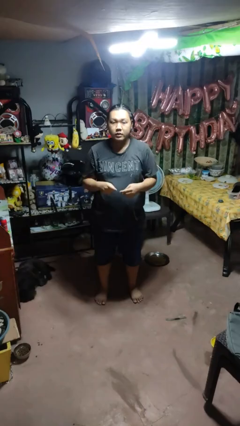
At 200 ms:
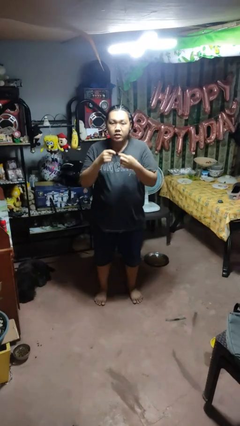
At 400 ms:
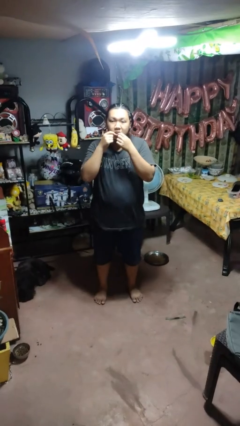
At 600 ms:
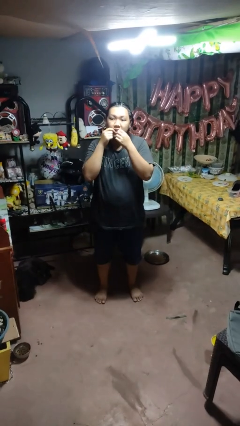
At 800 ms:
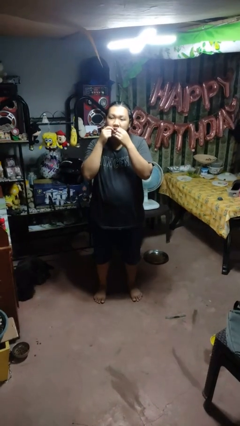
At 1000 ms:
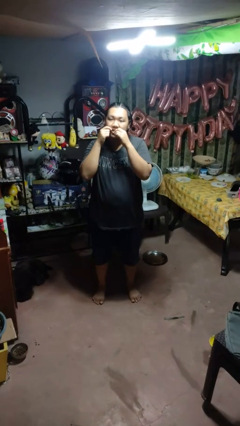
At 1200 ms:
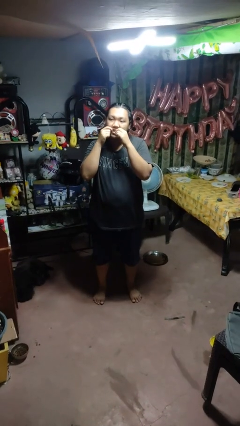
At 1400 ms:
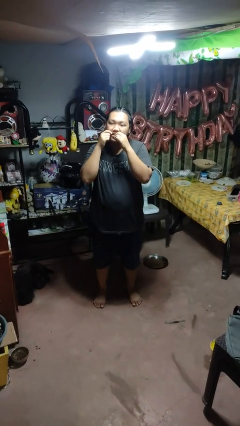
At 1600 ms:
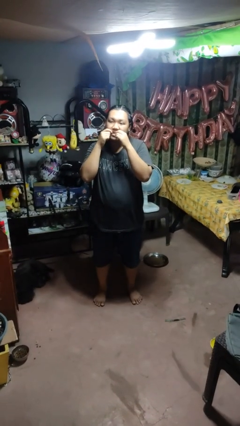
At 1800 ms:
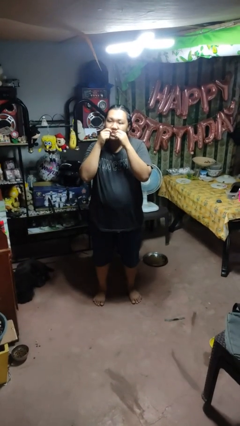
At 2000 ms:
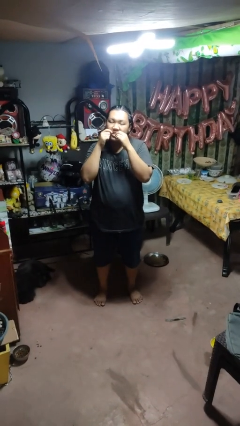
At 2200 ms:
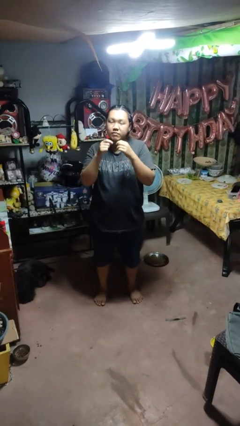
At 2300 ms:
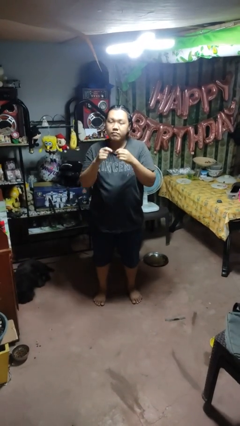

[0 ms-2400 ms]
person flosses

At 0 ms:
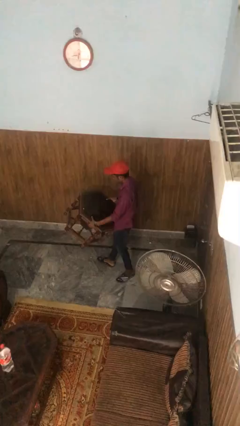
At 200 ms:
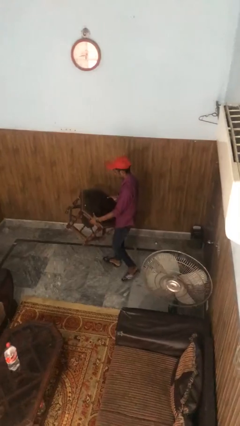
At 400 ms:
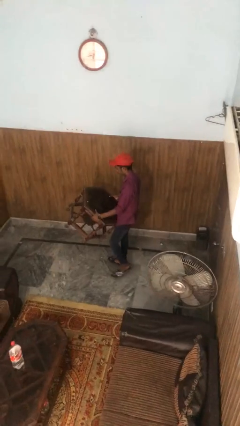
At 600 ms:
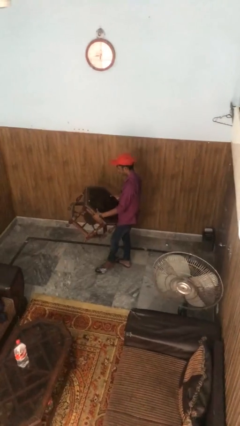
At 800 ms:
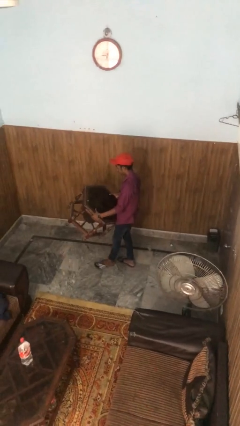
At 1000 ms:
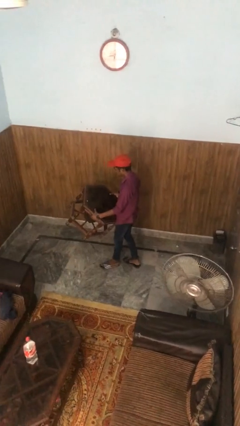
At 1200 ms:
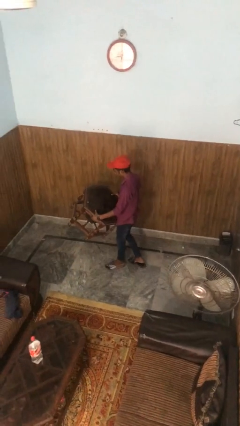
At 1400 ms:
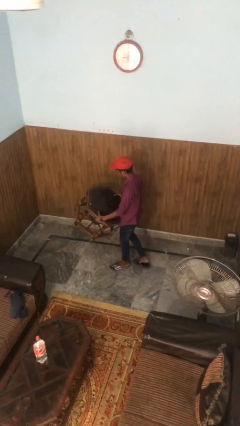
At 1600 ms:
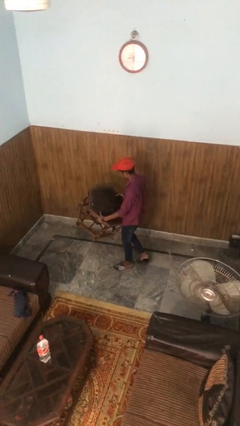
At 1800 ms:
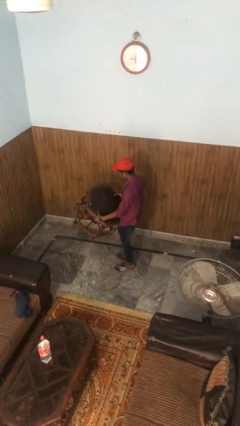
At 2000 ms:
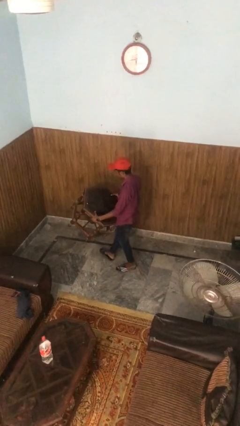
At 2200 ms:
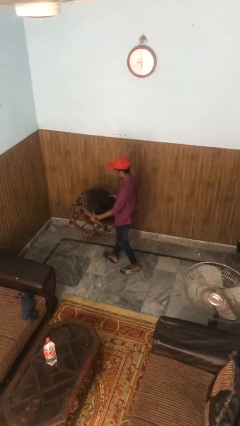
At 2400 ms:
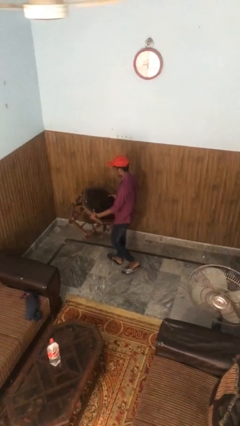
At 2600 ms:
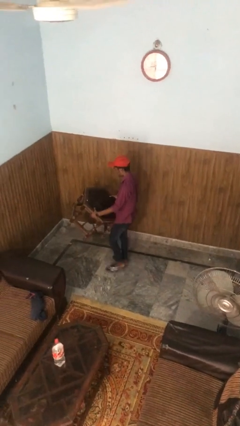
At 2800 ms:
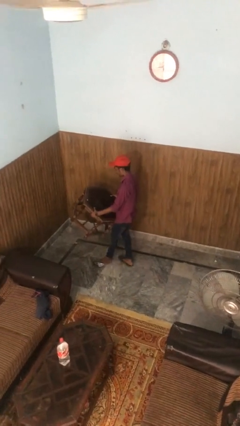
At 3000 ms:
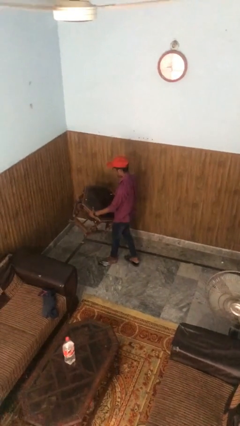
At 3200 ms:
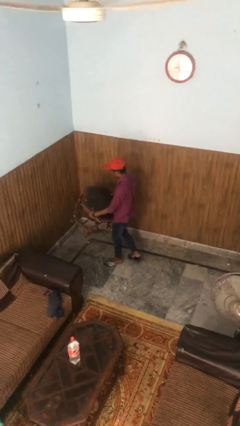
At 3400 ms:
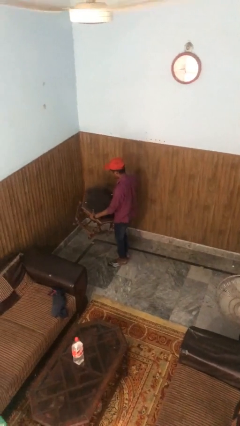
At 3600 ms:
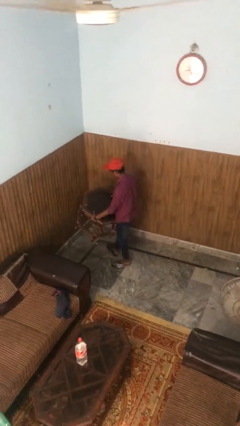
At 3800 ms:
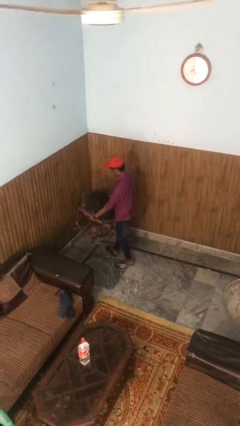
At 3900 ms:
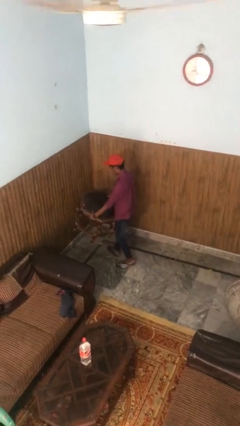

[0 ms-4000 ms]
person carries heavy object

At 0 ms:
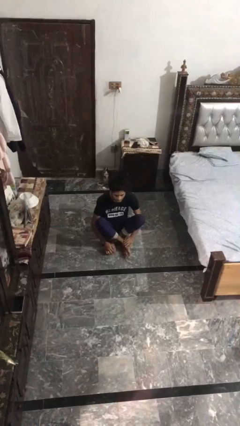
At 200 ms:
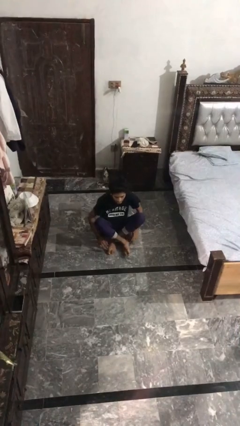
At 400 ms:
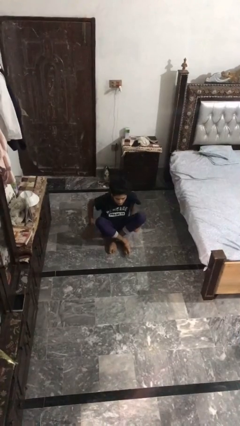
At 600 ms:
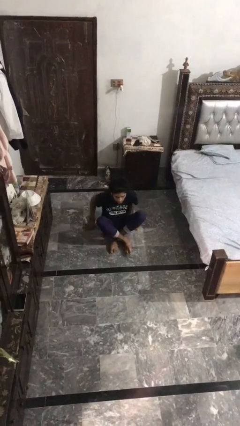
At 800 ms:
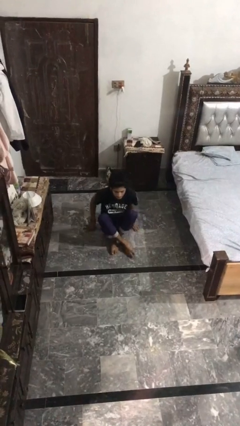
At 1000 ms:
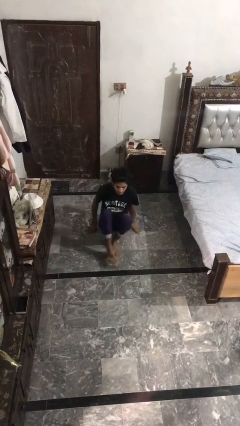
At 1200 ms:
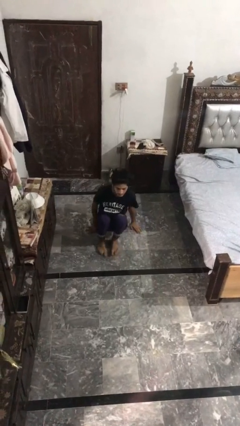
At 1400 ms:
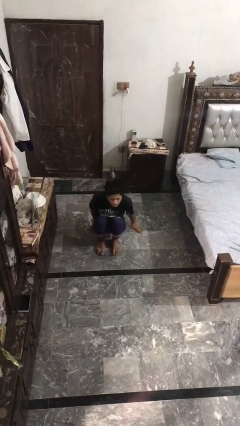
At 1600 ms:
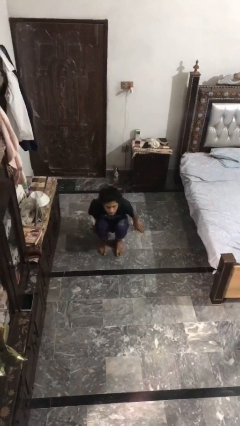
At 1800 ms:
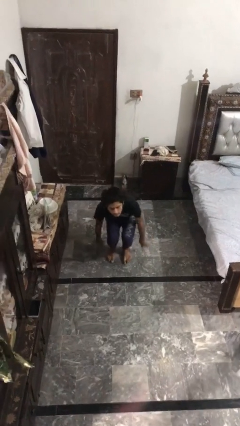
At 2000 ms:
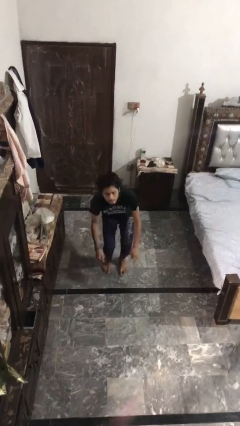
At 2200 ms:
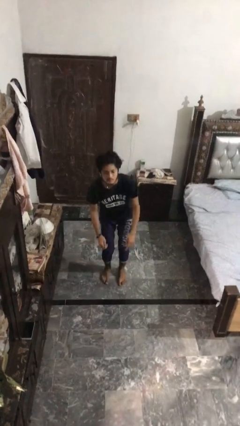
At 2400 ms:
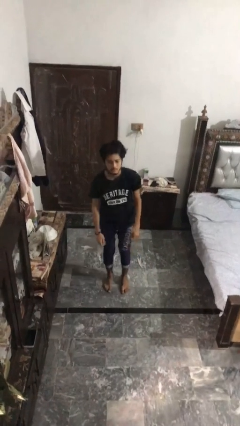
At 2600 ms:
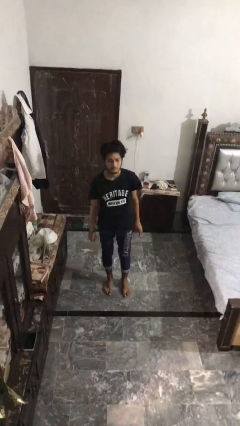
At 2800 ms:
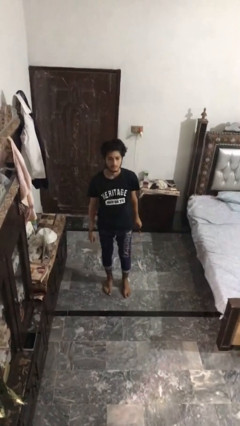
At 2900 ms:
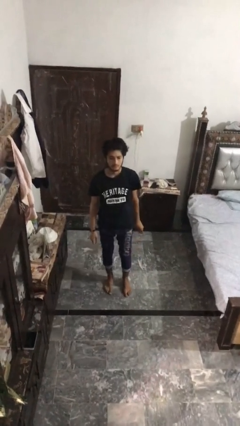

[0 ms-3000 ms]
person stands up from floor

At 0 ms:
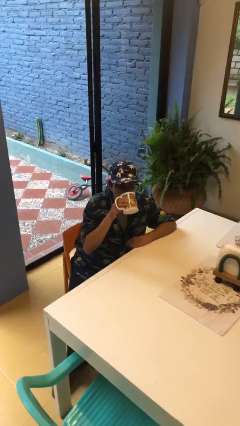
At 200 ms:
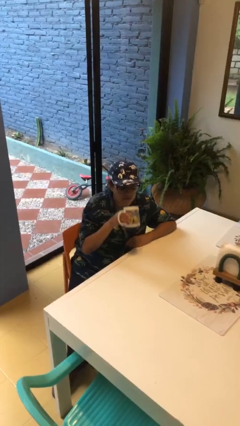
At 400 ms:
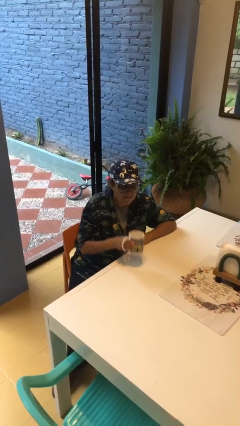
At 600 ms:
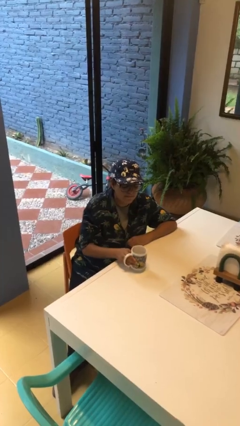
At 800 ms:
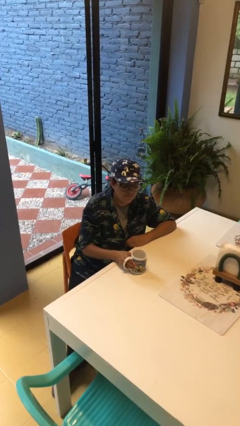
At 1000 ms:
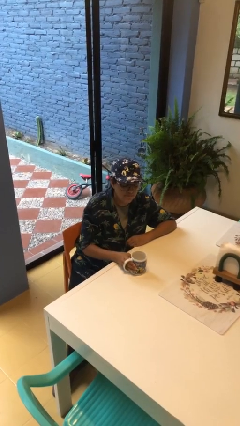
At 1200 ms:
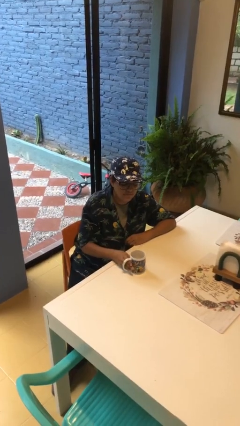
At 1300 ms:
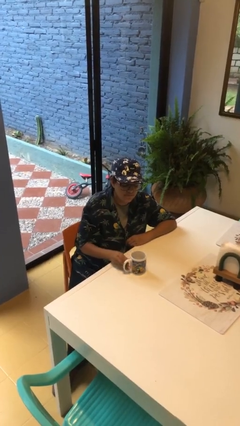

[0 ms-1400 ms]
person puts down object on table

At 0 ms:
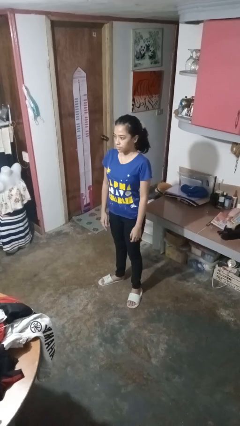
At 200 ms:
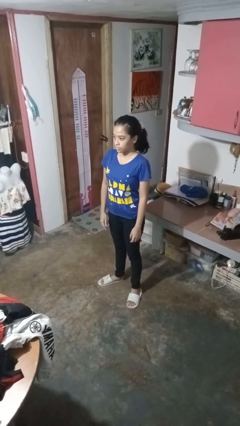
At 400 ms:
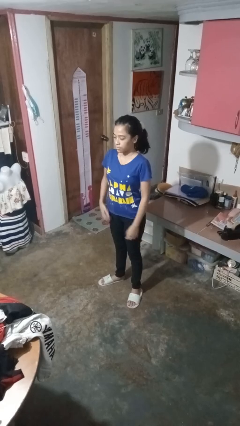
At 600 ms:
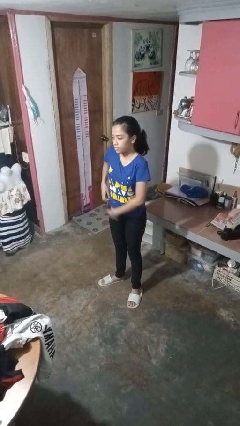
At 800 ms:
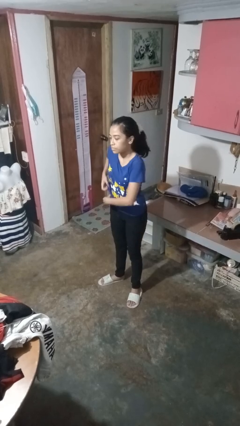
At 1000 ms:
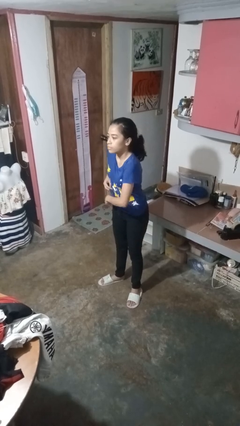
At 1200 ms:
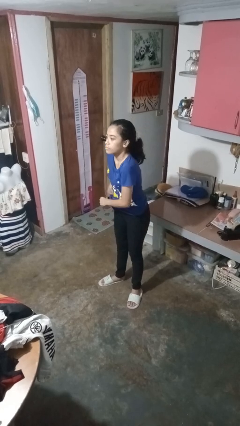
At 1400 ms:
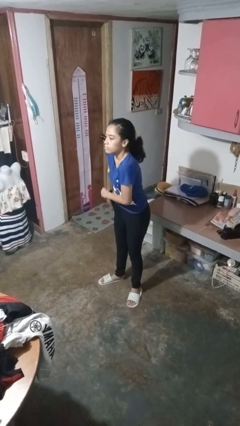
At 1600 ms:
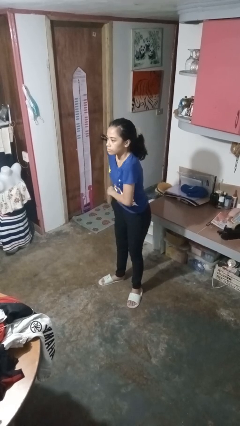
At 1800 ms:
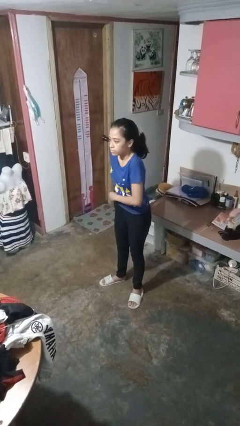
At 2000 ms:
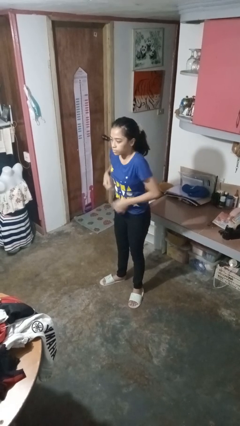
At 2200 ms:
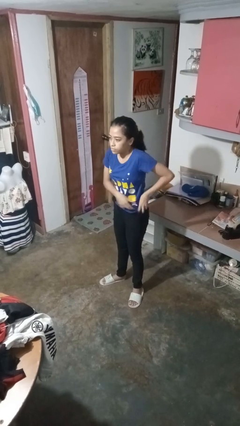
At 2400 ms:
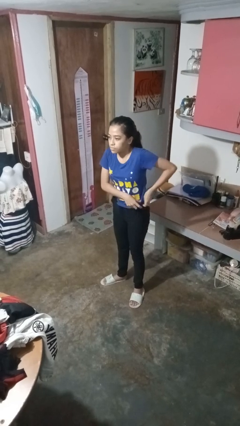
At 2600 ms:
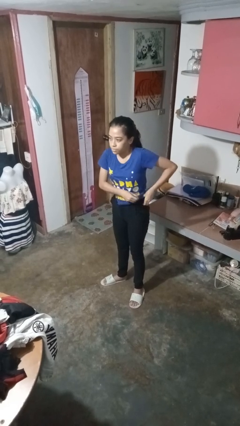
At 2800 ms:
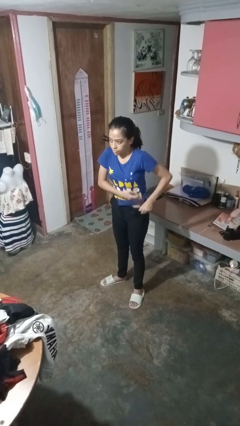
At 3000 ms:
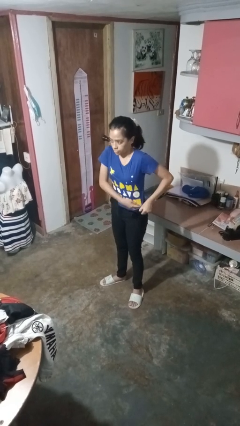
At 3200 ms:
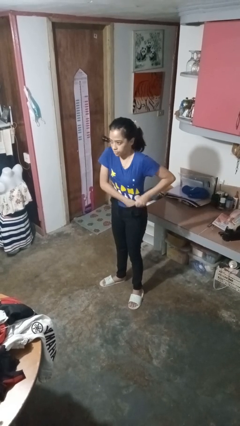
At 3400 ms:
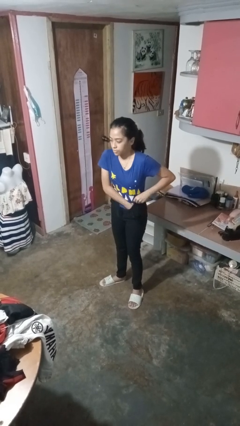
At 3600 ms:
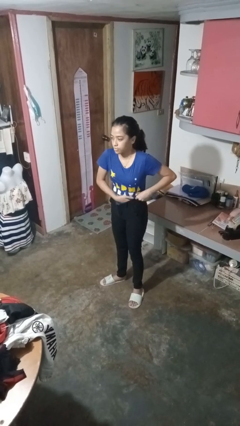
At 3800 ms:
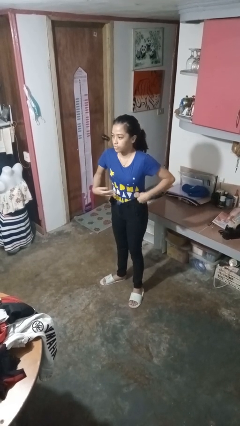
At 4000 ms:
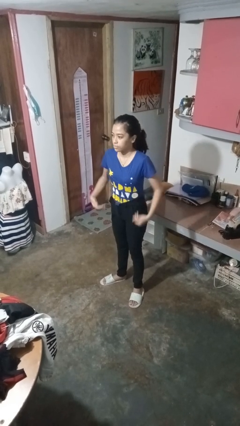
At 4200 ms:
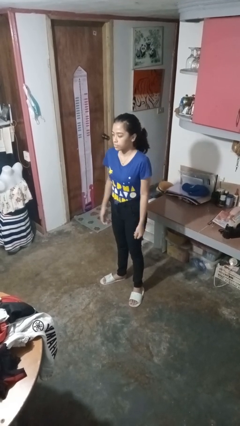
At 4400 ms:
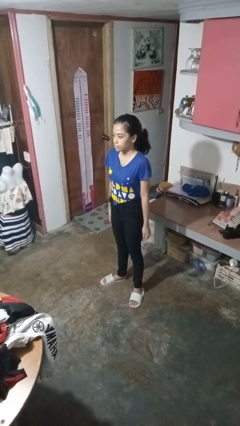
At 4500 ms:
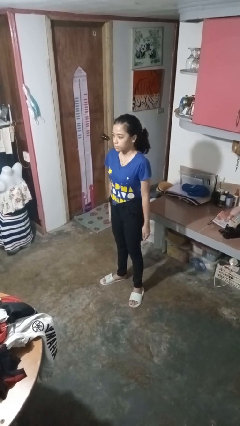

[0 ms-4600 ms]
person tucks in shirt

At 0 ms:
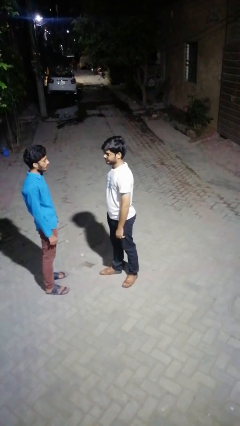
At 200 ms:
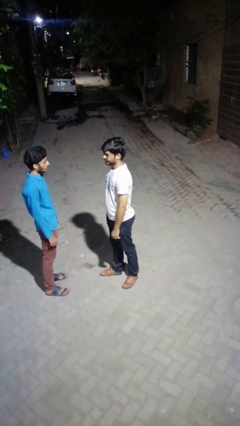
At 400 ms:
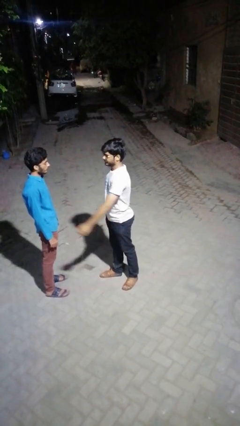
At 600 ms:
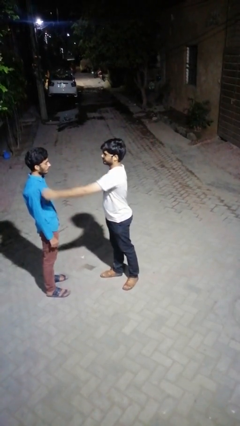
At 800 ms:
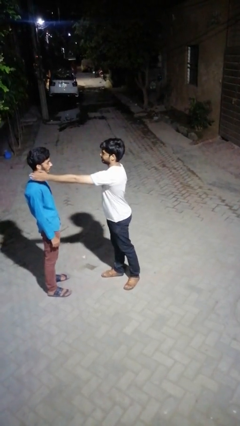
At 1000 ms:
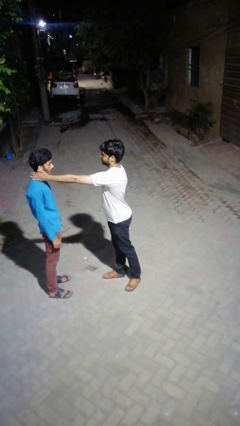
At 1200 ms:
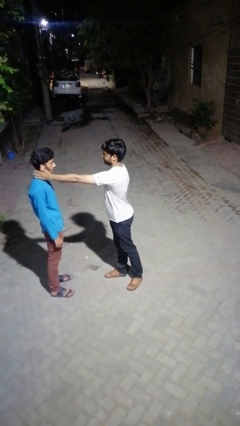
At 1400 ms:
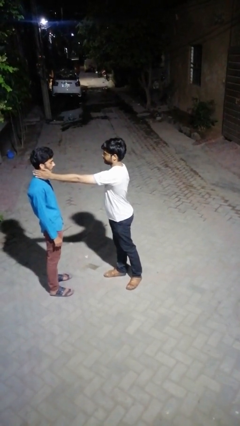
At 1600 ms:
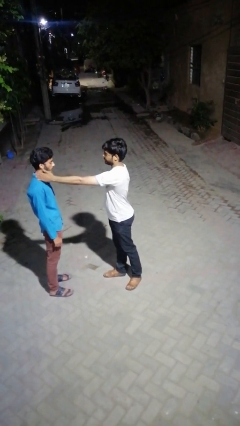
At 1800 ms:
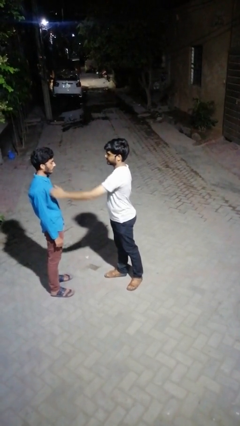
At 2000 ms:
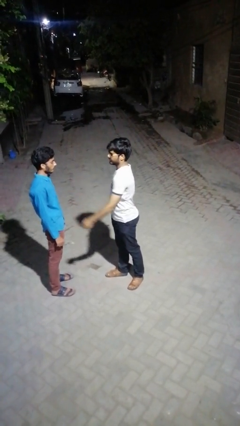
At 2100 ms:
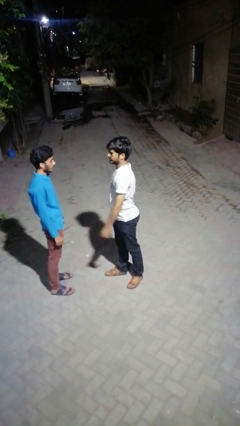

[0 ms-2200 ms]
person touches face of person
